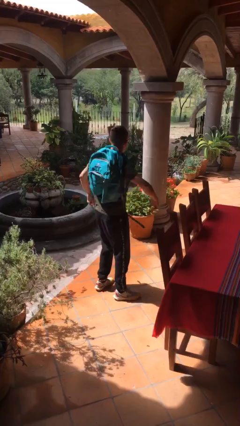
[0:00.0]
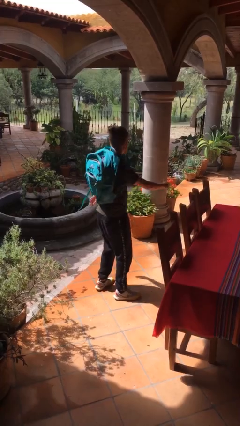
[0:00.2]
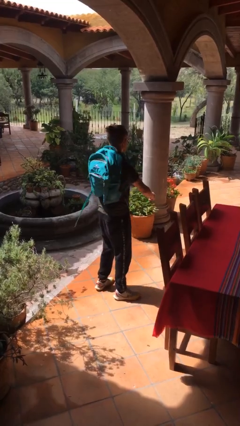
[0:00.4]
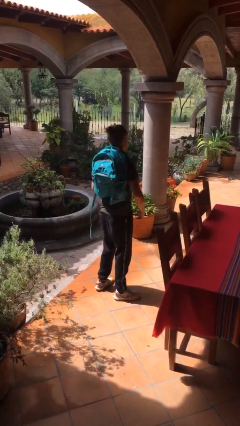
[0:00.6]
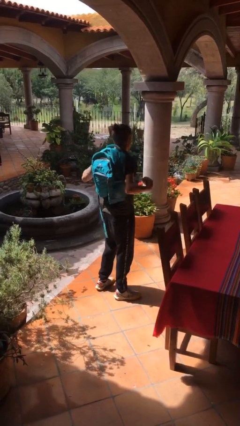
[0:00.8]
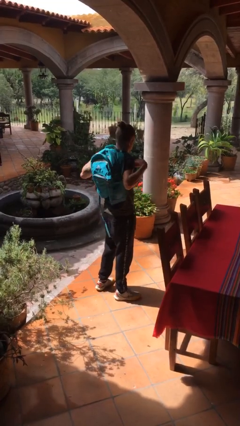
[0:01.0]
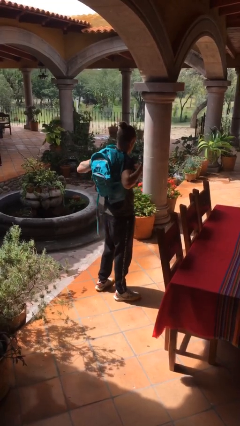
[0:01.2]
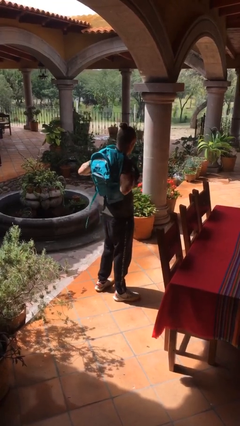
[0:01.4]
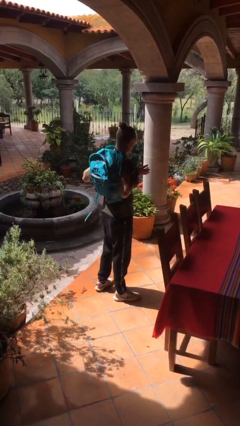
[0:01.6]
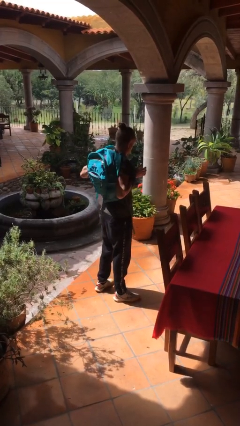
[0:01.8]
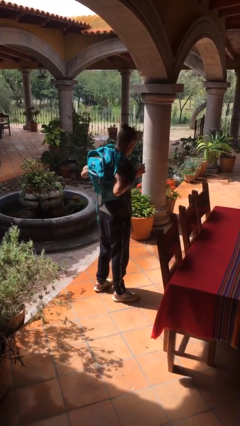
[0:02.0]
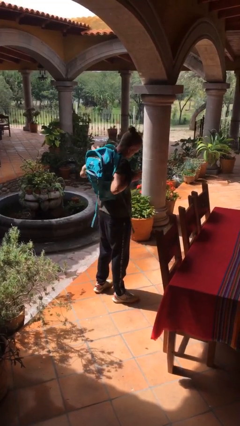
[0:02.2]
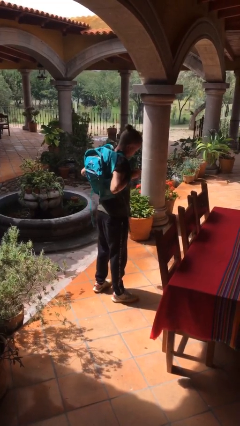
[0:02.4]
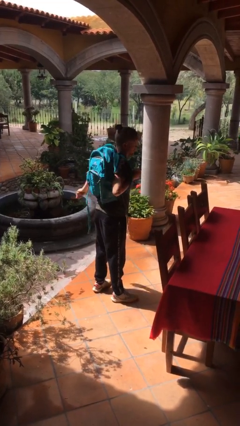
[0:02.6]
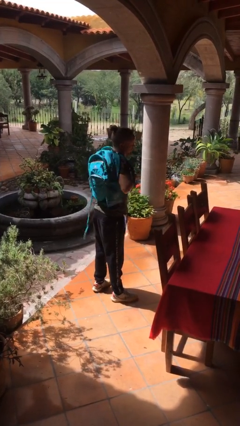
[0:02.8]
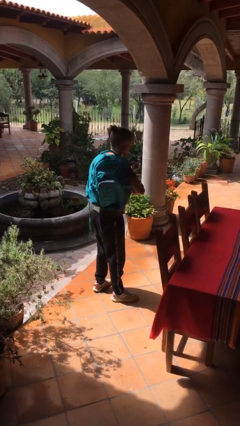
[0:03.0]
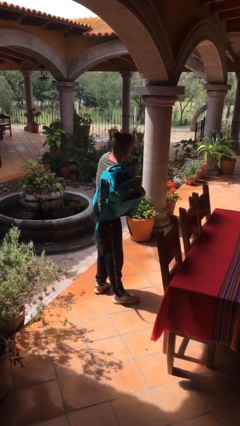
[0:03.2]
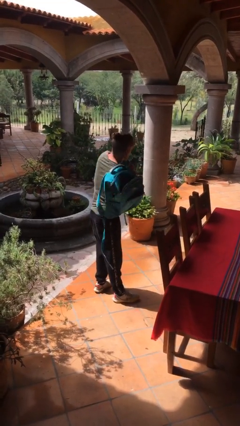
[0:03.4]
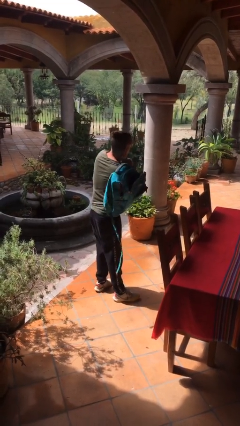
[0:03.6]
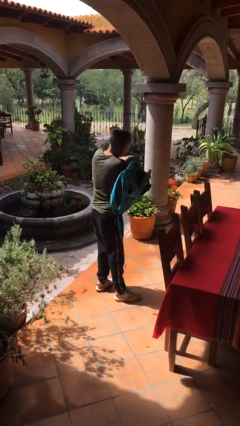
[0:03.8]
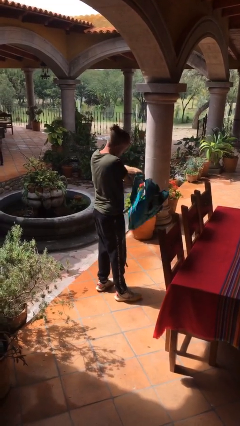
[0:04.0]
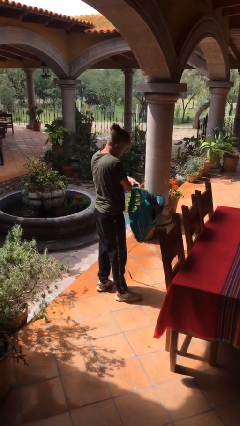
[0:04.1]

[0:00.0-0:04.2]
person takes off backpack

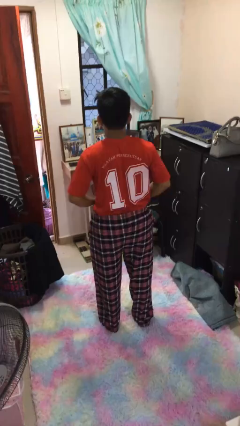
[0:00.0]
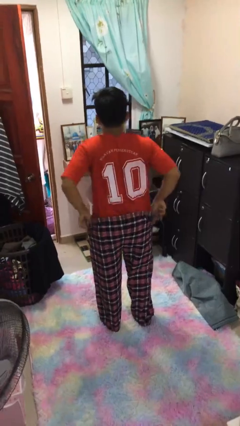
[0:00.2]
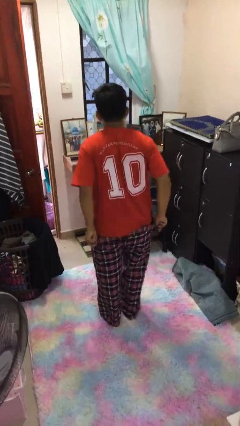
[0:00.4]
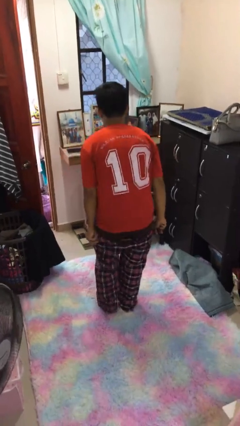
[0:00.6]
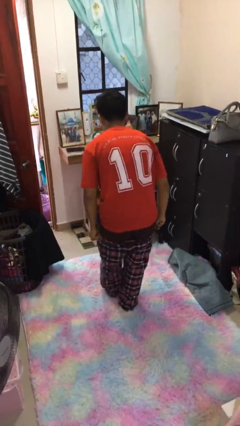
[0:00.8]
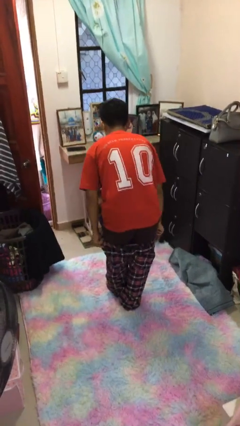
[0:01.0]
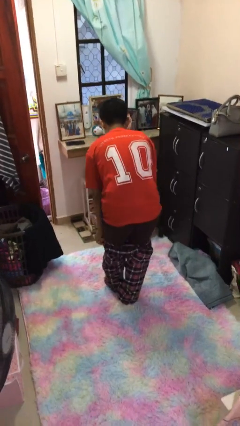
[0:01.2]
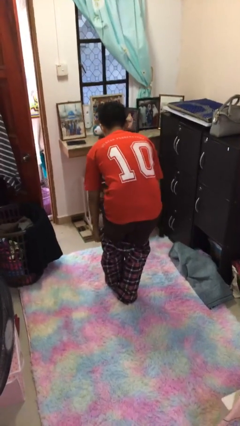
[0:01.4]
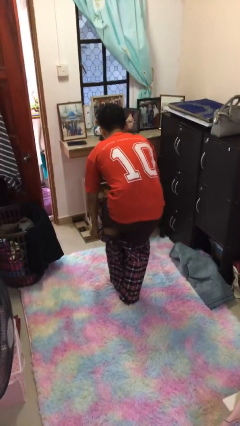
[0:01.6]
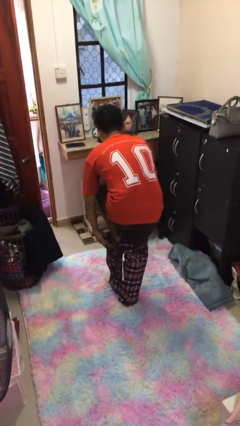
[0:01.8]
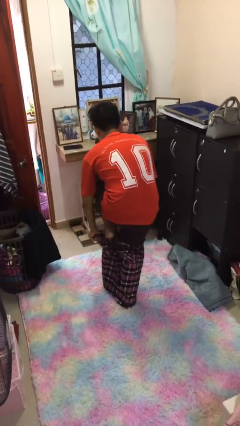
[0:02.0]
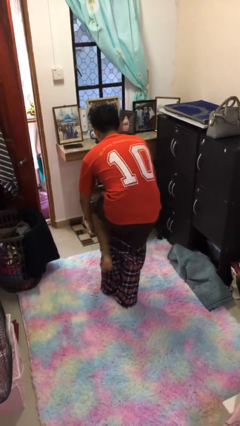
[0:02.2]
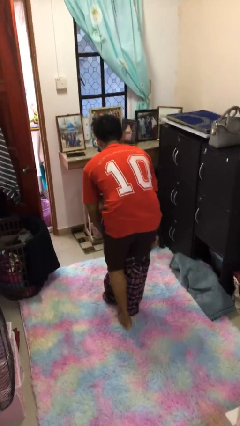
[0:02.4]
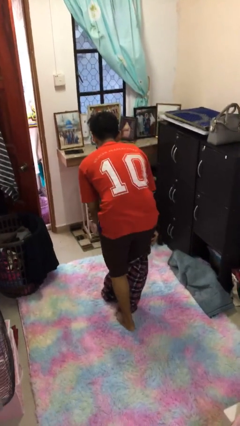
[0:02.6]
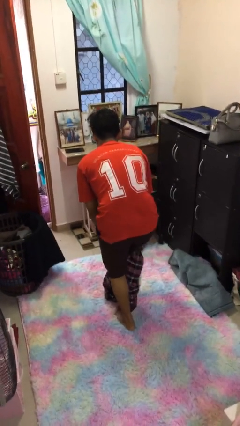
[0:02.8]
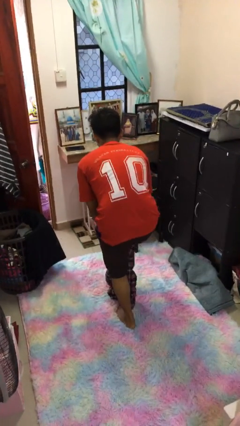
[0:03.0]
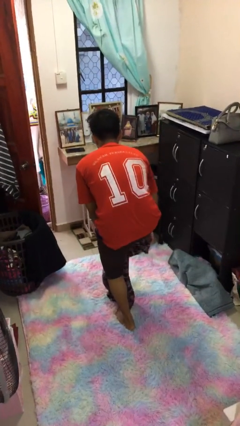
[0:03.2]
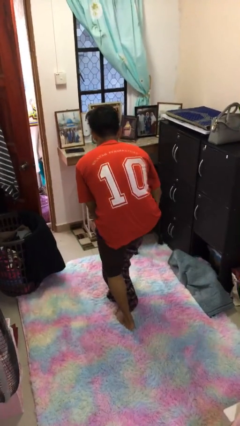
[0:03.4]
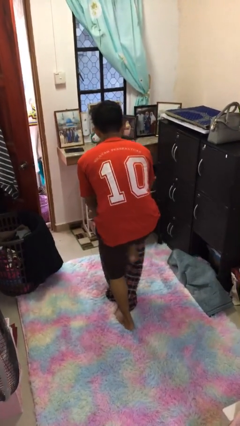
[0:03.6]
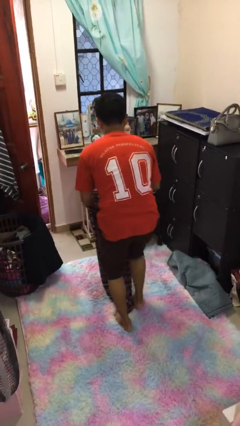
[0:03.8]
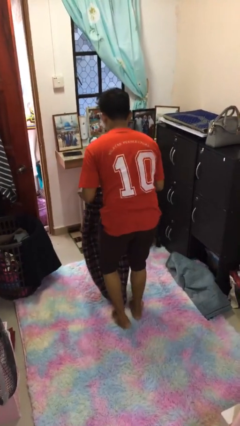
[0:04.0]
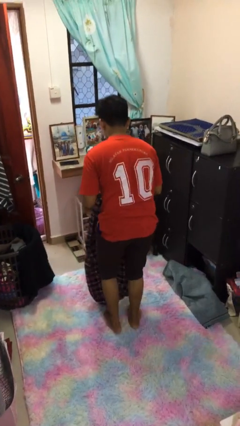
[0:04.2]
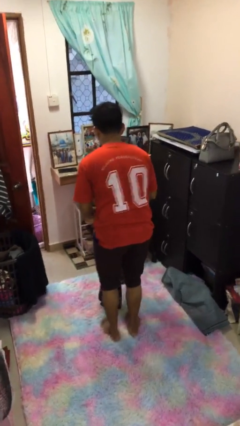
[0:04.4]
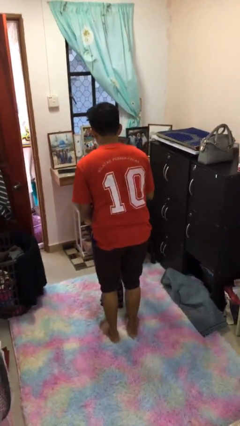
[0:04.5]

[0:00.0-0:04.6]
person takes off pants

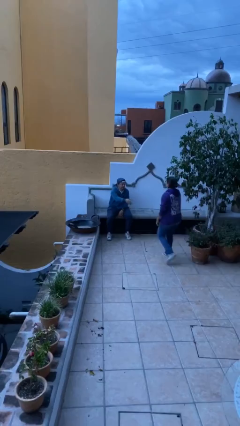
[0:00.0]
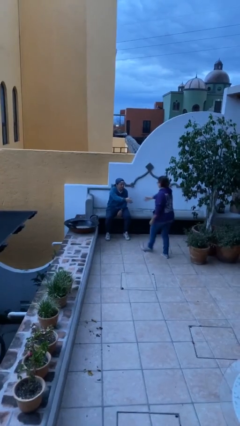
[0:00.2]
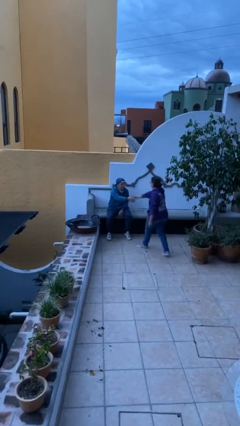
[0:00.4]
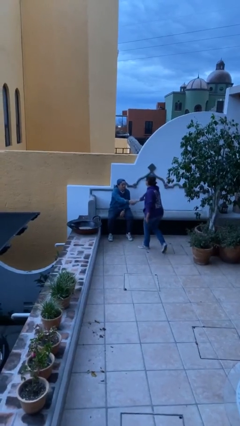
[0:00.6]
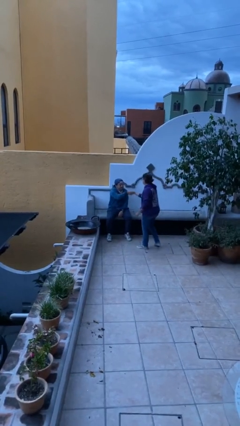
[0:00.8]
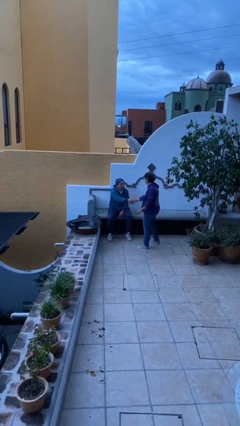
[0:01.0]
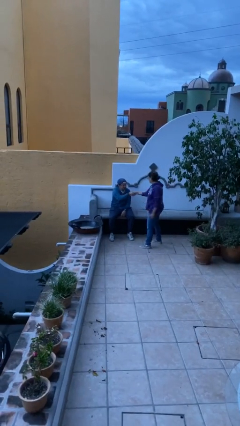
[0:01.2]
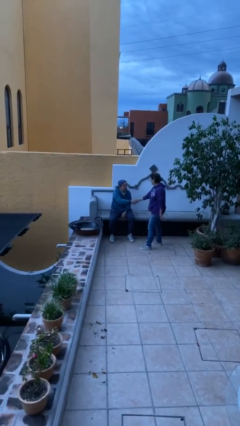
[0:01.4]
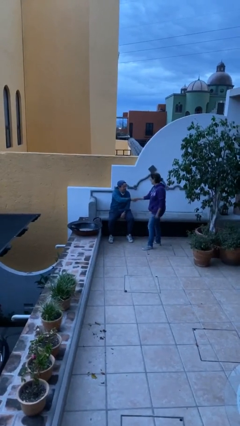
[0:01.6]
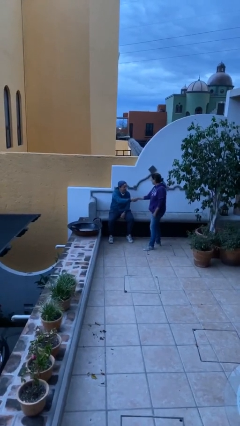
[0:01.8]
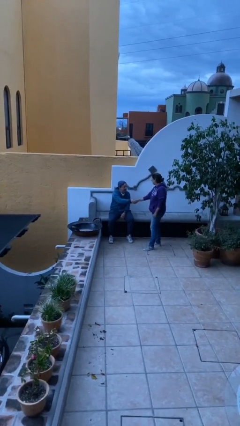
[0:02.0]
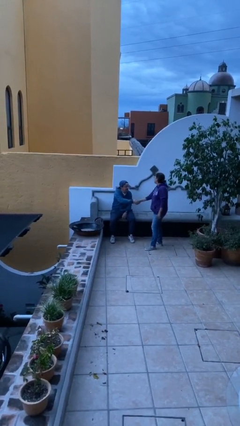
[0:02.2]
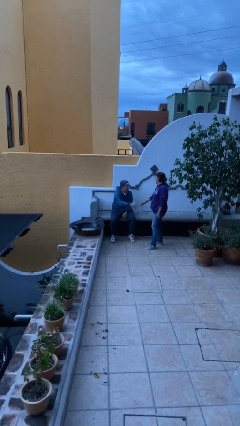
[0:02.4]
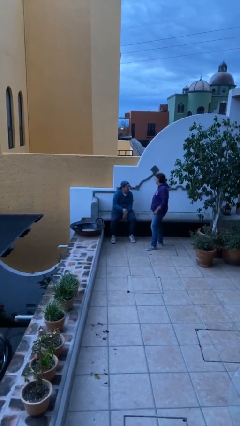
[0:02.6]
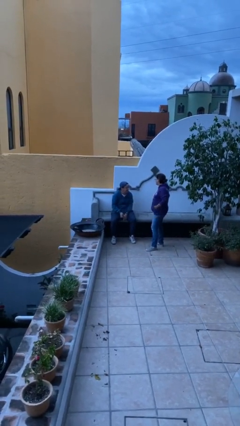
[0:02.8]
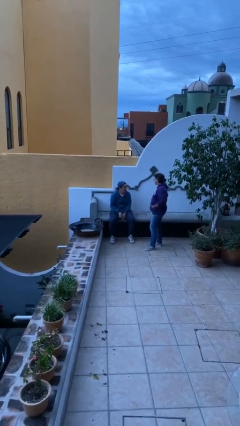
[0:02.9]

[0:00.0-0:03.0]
person shakes hand

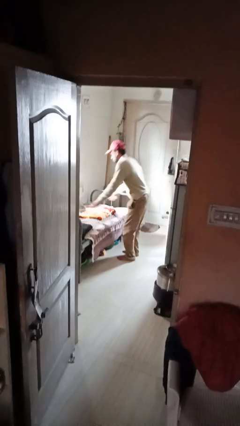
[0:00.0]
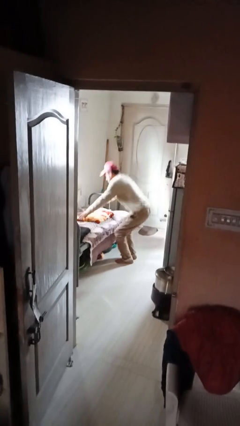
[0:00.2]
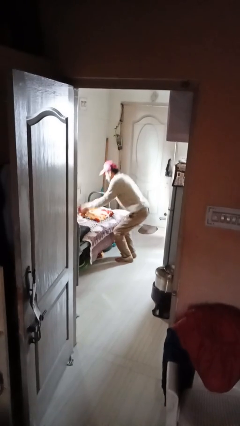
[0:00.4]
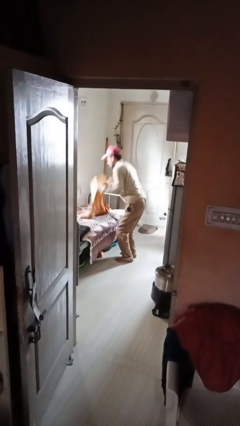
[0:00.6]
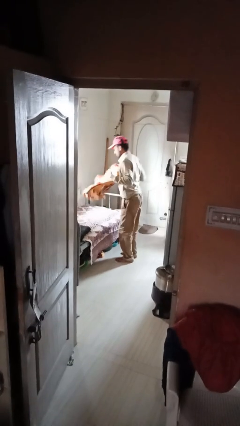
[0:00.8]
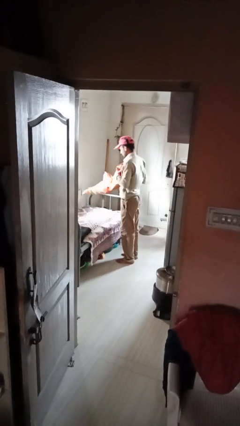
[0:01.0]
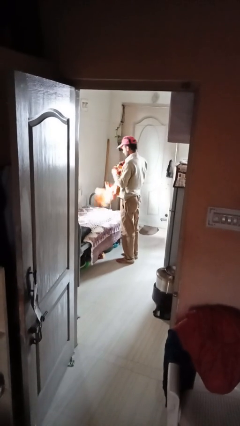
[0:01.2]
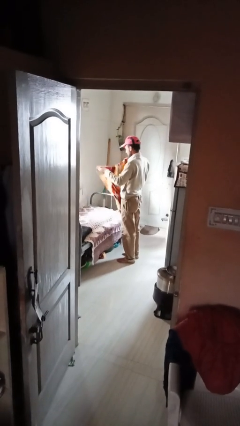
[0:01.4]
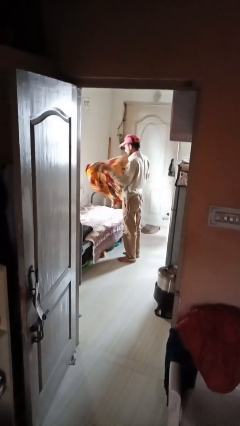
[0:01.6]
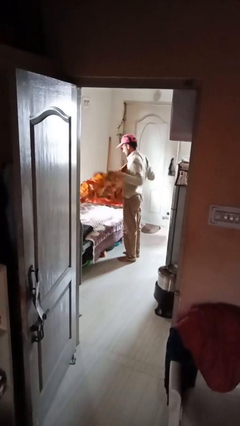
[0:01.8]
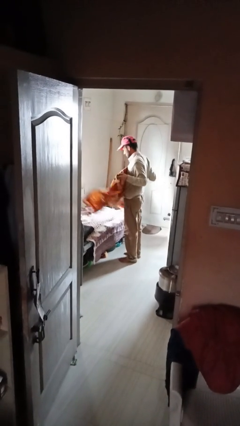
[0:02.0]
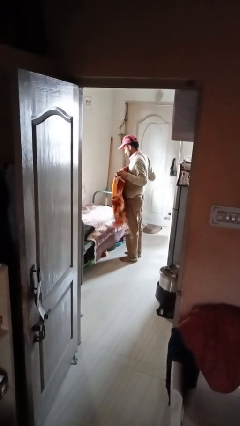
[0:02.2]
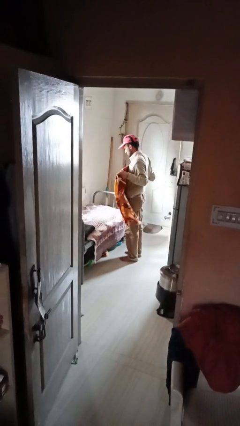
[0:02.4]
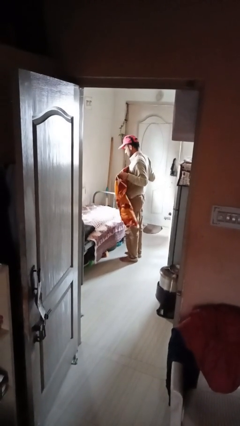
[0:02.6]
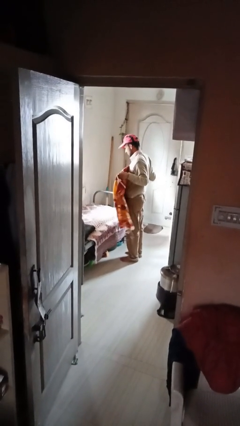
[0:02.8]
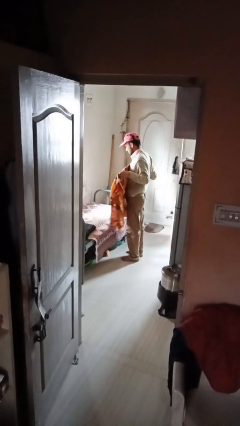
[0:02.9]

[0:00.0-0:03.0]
person unfolds blanket

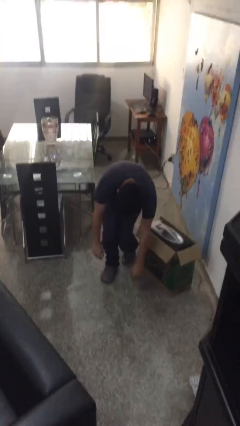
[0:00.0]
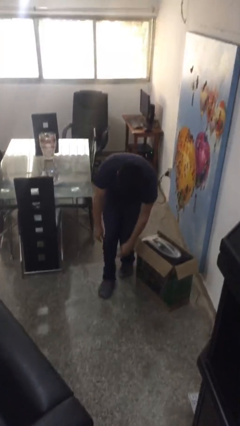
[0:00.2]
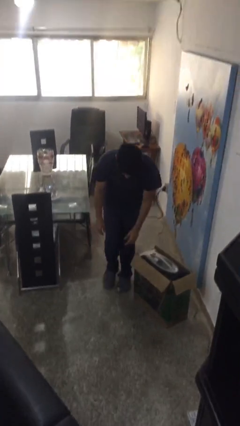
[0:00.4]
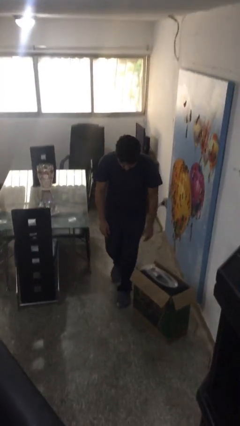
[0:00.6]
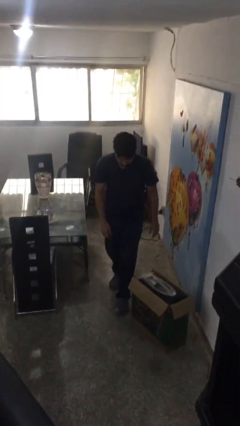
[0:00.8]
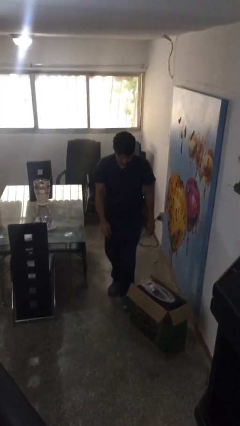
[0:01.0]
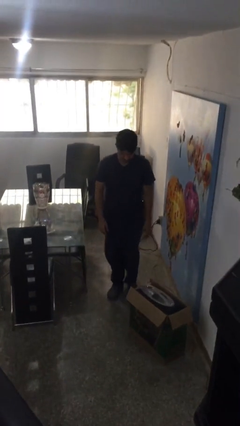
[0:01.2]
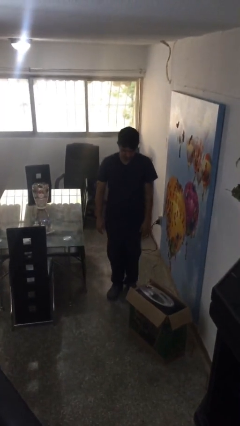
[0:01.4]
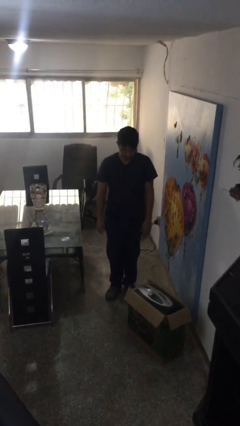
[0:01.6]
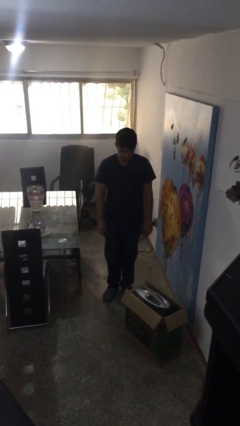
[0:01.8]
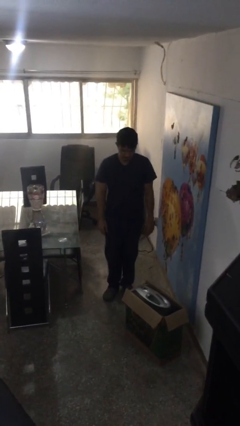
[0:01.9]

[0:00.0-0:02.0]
person stands up from floor

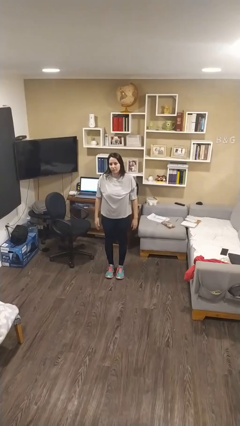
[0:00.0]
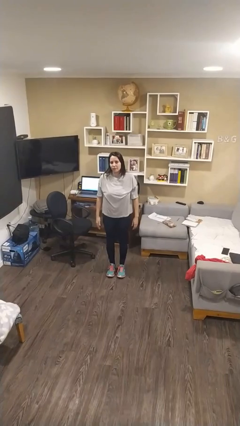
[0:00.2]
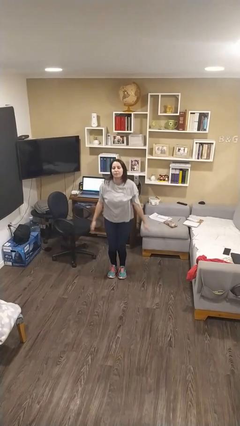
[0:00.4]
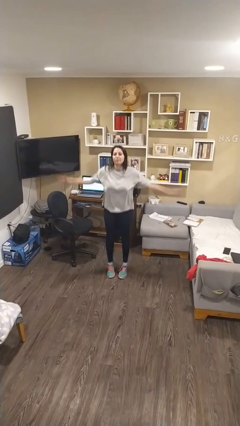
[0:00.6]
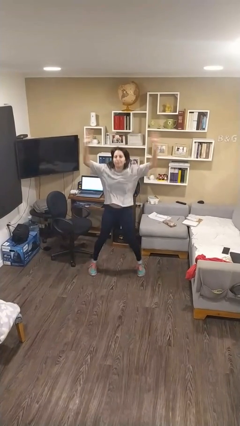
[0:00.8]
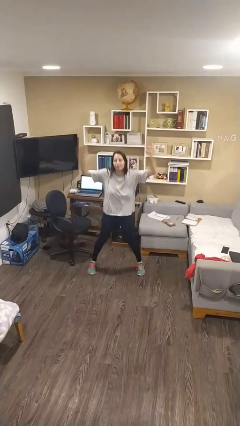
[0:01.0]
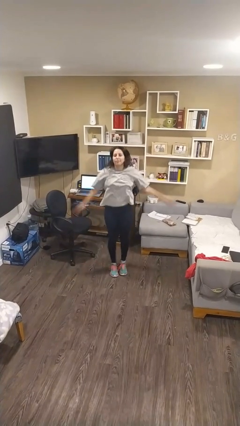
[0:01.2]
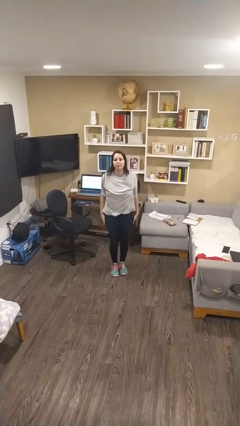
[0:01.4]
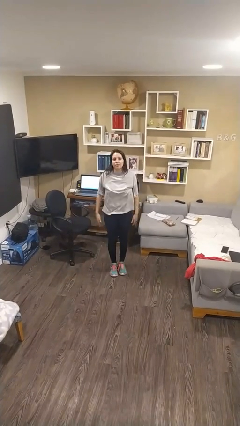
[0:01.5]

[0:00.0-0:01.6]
person exercises with jumping jacks
